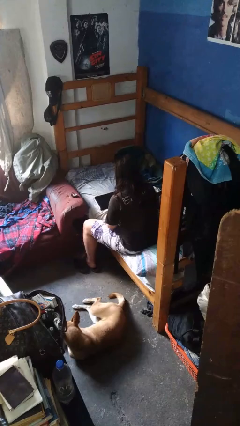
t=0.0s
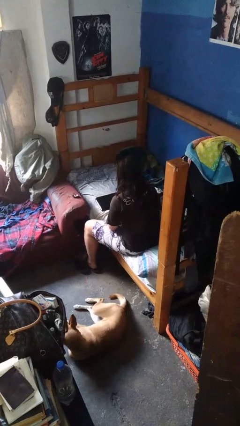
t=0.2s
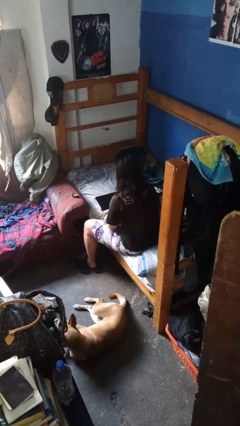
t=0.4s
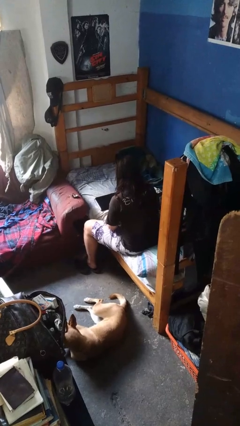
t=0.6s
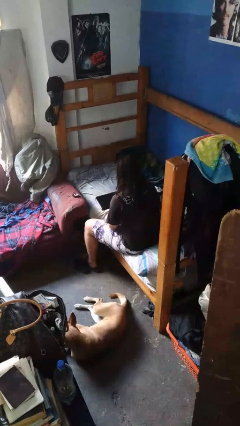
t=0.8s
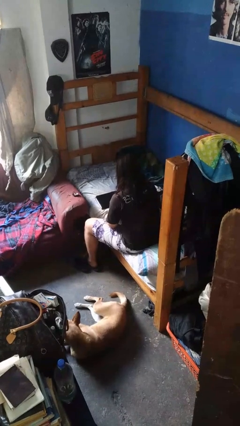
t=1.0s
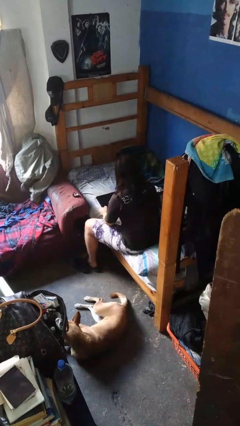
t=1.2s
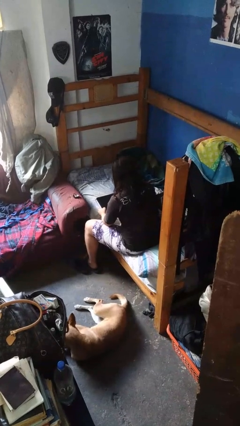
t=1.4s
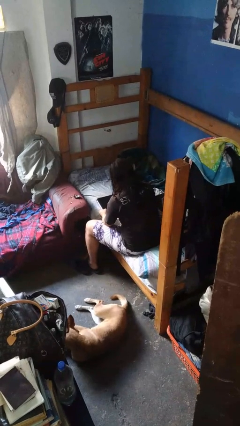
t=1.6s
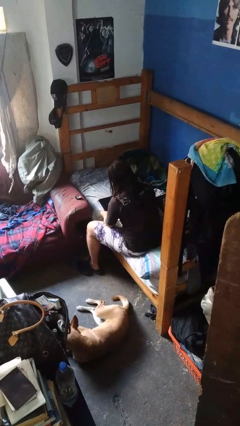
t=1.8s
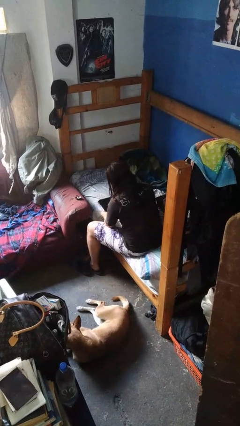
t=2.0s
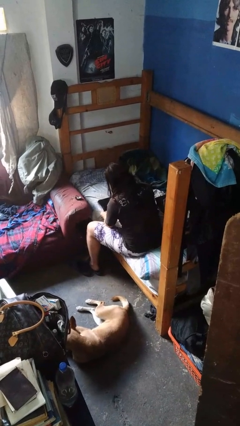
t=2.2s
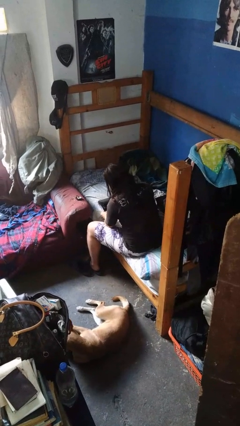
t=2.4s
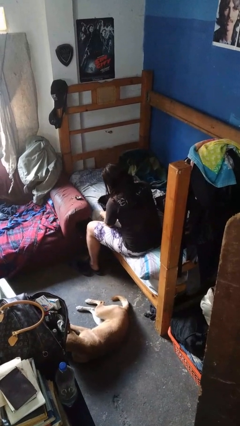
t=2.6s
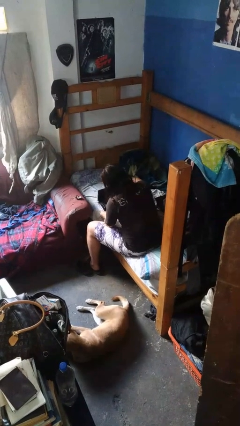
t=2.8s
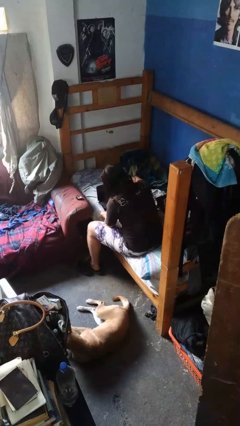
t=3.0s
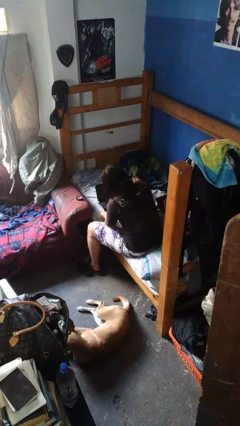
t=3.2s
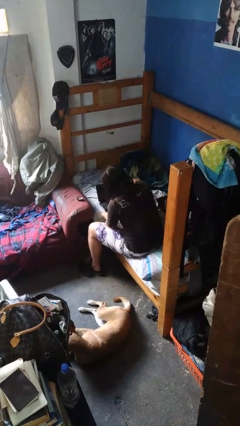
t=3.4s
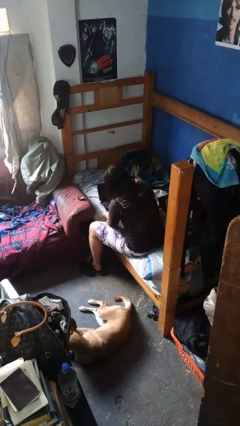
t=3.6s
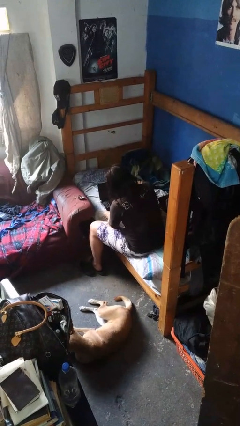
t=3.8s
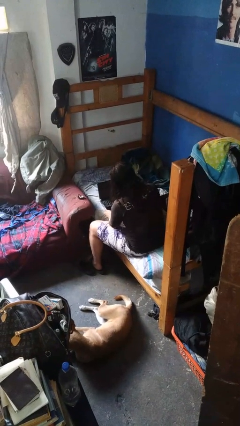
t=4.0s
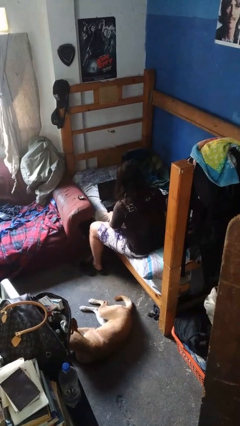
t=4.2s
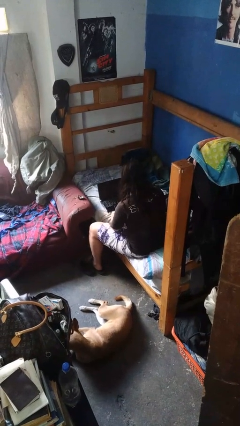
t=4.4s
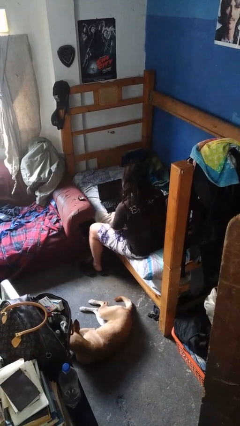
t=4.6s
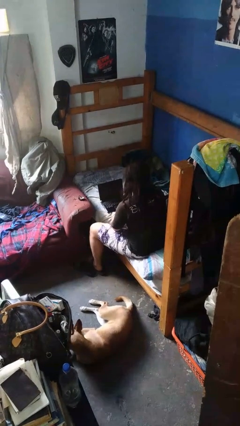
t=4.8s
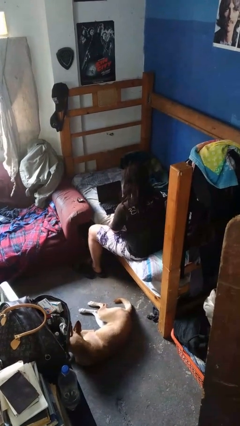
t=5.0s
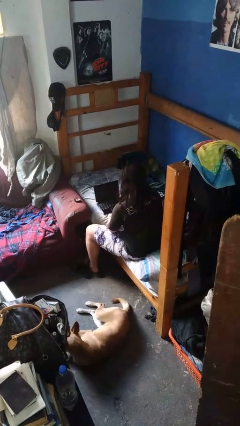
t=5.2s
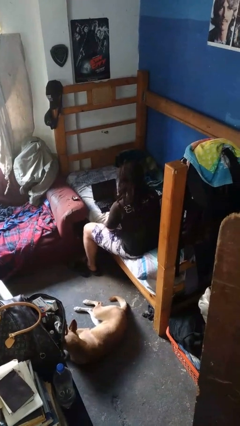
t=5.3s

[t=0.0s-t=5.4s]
person opens laptop

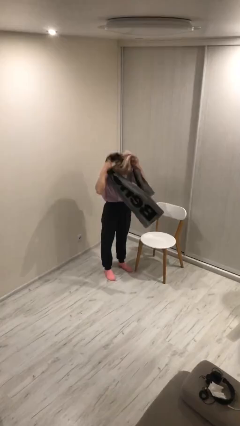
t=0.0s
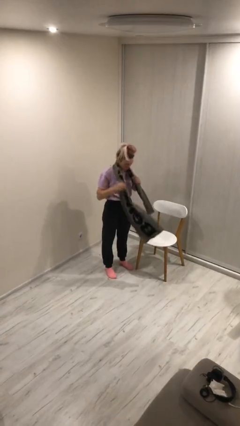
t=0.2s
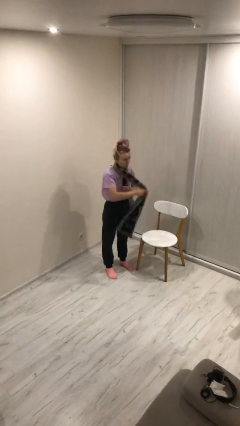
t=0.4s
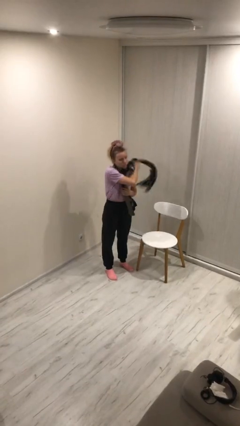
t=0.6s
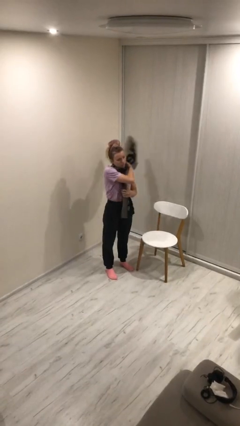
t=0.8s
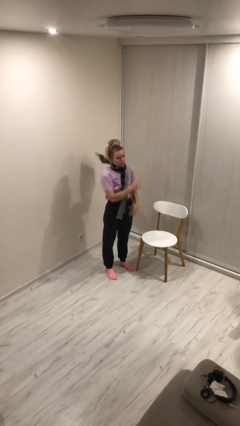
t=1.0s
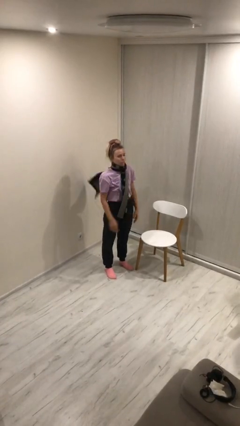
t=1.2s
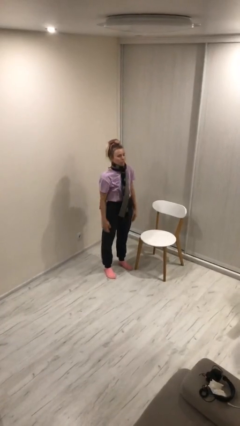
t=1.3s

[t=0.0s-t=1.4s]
person puts on scarf

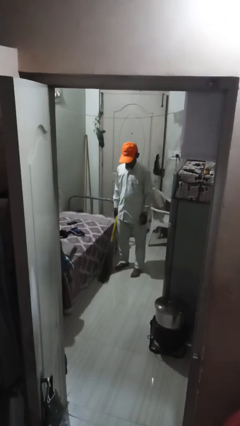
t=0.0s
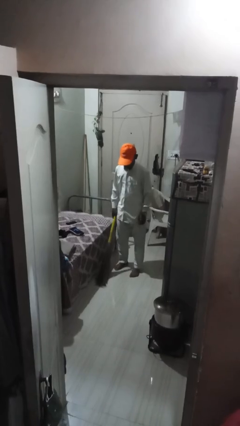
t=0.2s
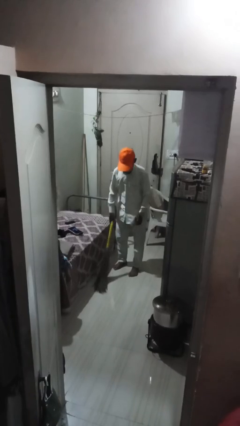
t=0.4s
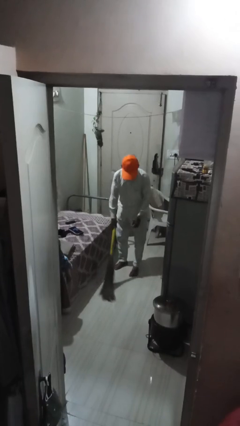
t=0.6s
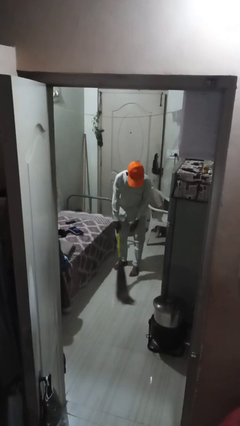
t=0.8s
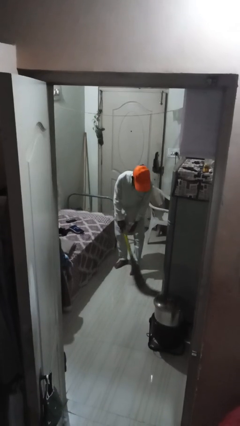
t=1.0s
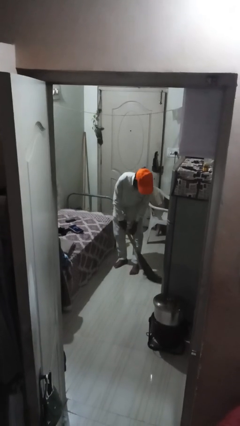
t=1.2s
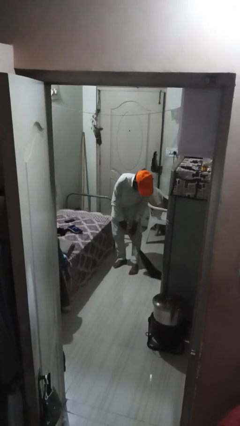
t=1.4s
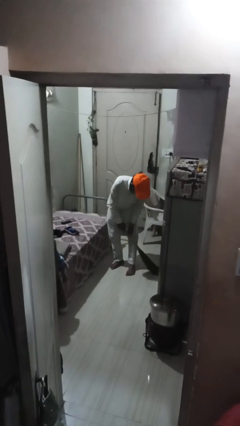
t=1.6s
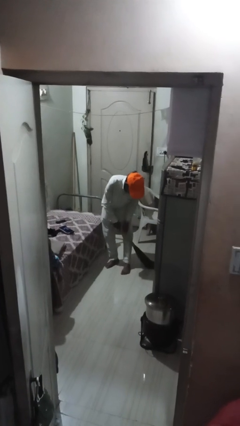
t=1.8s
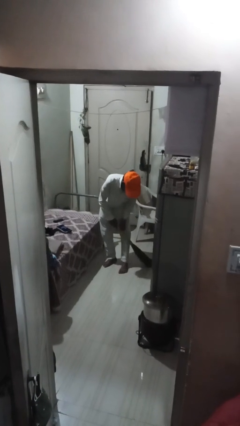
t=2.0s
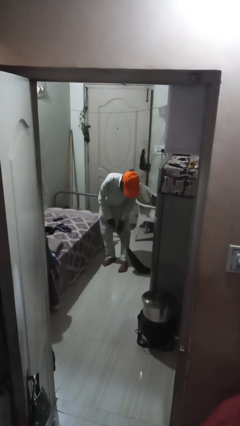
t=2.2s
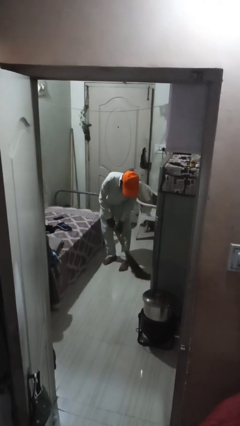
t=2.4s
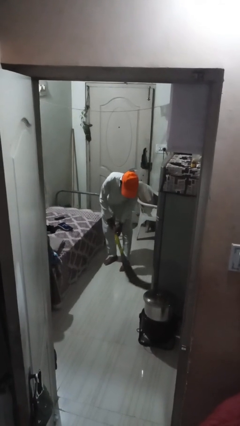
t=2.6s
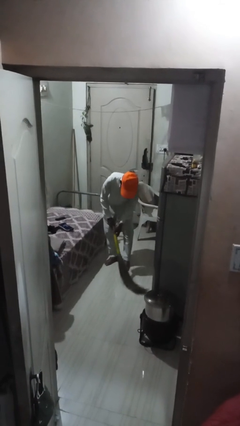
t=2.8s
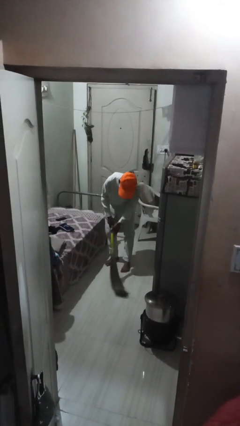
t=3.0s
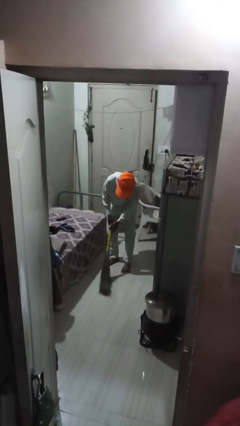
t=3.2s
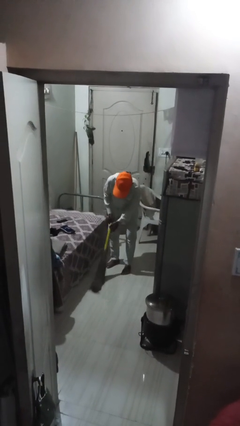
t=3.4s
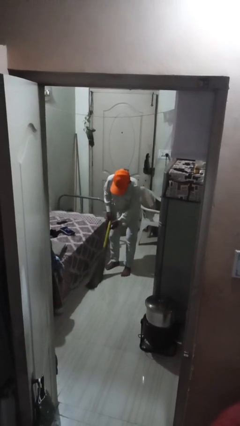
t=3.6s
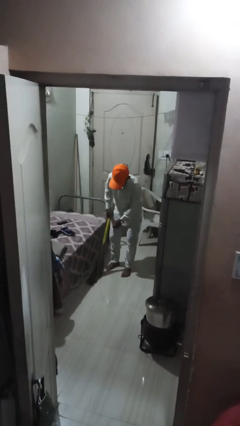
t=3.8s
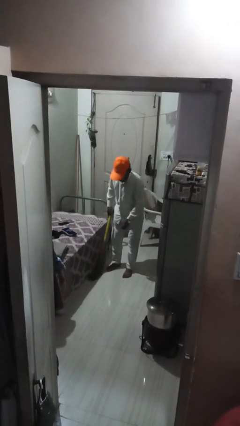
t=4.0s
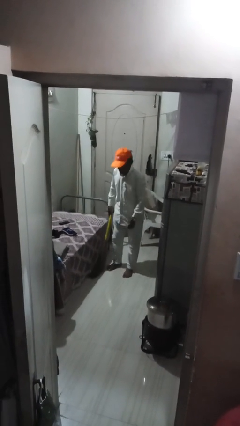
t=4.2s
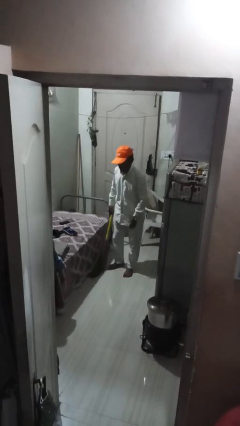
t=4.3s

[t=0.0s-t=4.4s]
person sweeps floor

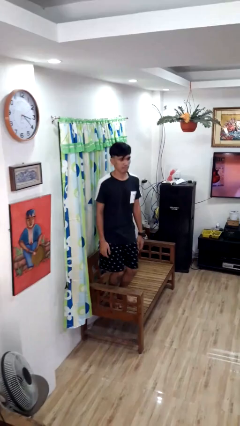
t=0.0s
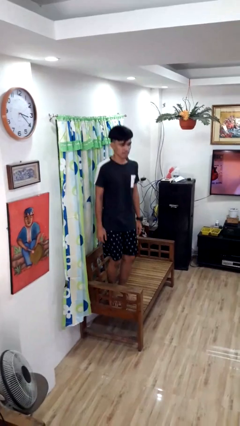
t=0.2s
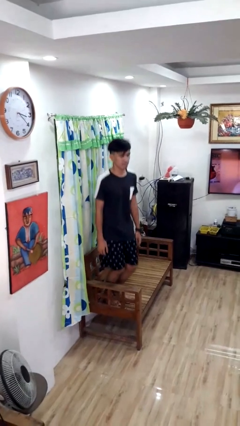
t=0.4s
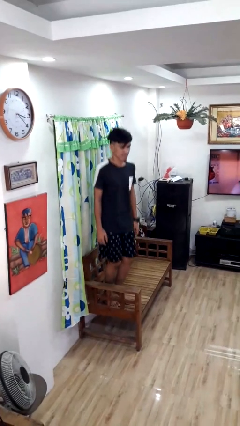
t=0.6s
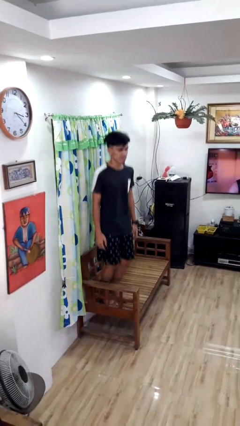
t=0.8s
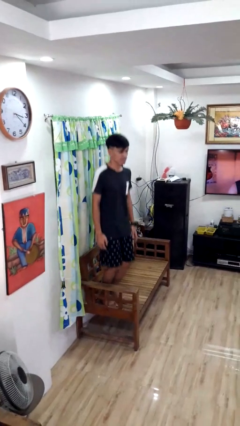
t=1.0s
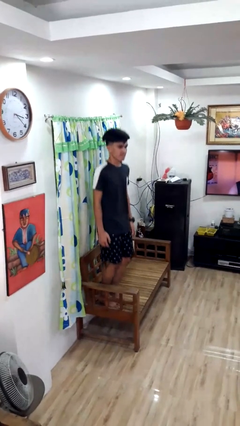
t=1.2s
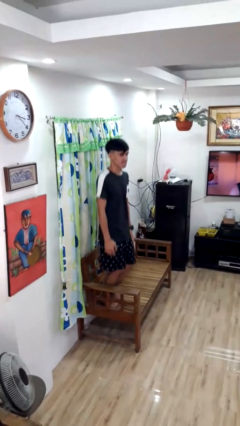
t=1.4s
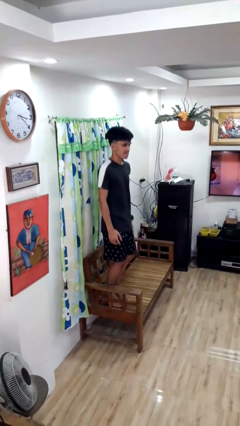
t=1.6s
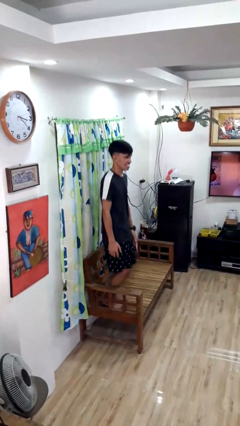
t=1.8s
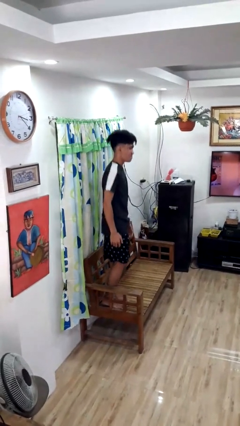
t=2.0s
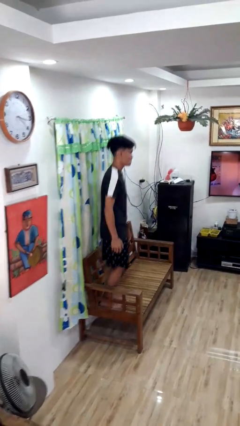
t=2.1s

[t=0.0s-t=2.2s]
person jumps on couch

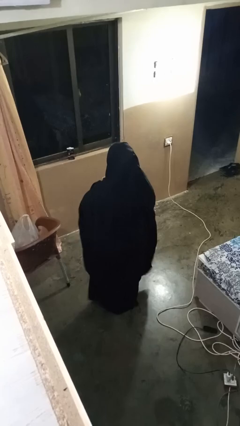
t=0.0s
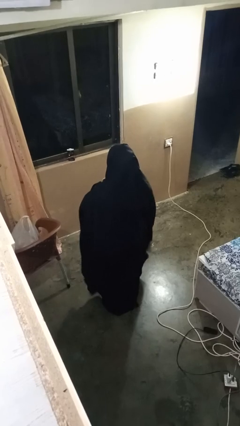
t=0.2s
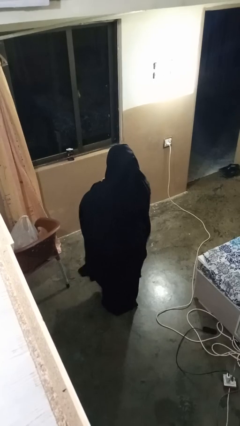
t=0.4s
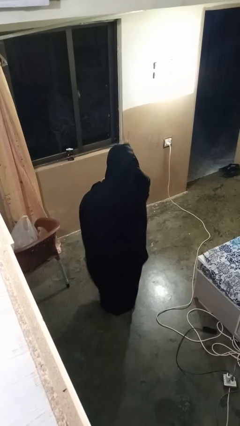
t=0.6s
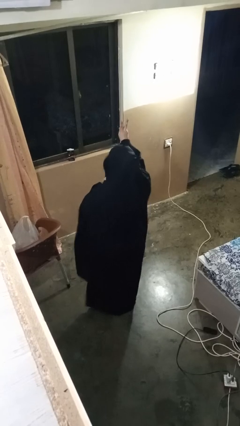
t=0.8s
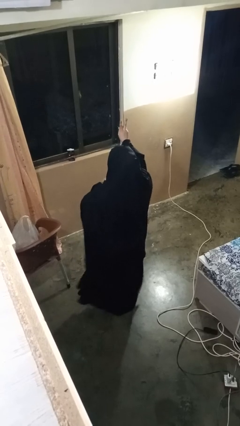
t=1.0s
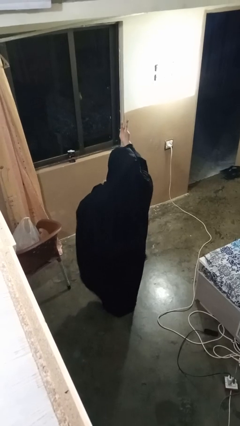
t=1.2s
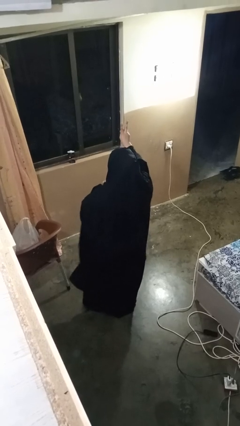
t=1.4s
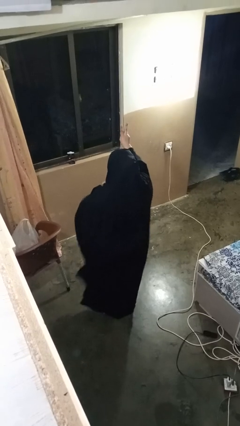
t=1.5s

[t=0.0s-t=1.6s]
person gestures peace

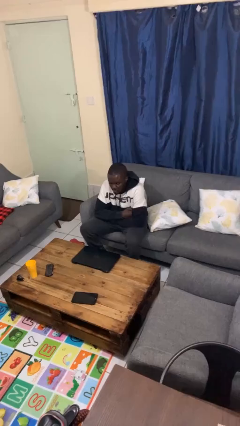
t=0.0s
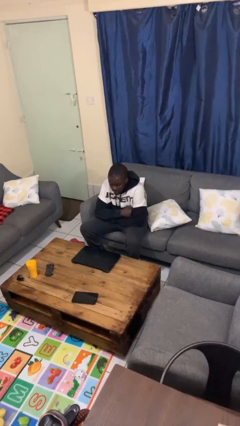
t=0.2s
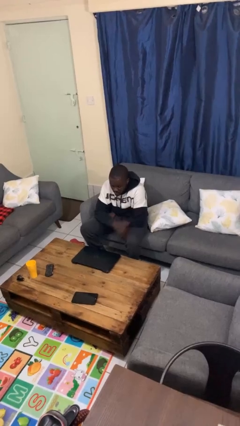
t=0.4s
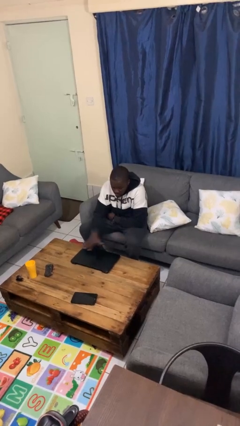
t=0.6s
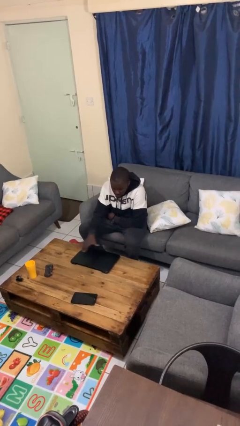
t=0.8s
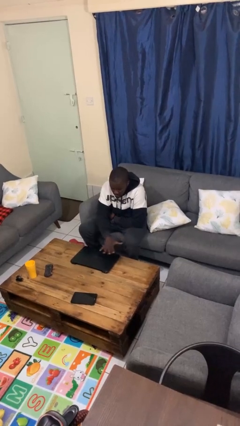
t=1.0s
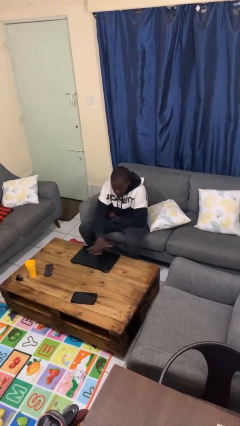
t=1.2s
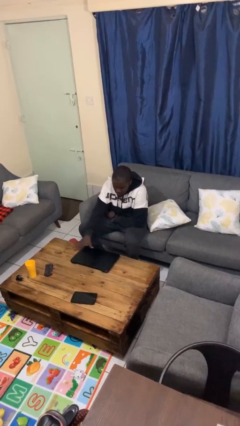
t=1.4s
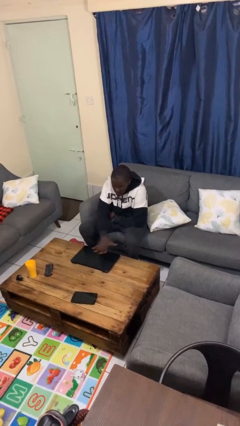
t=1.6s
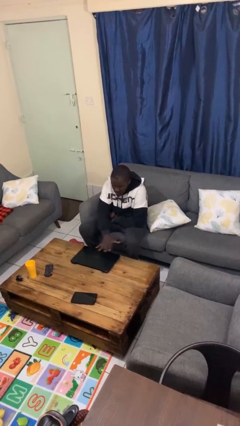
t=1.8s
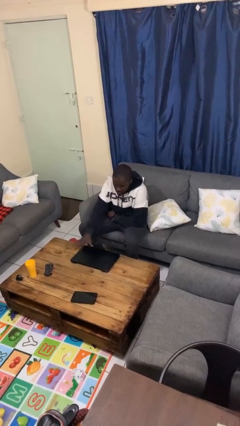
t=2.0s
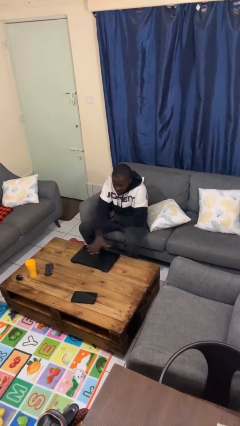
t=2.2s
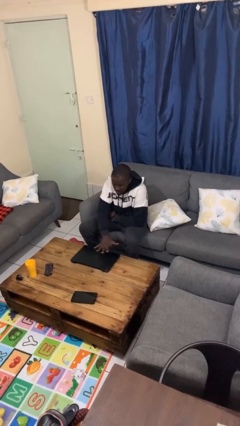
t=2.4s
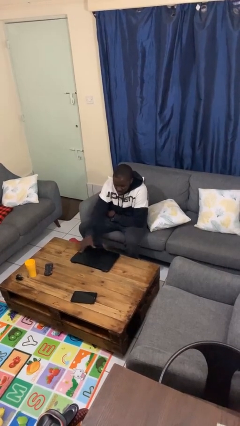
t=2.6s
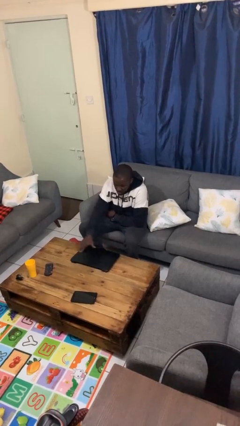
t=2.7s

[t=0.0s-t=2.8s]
person waves hand over object
